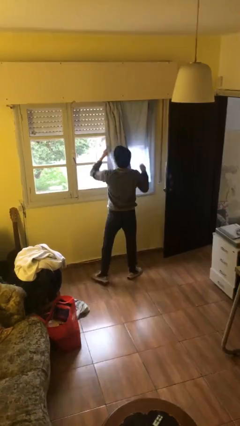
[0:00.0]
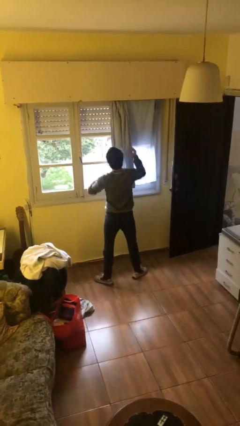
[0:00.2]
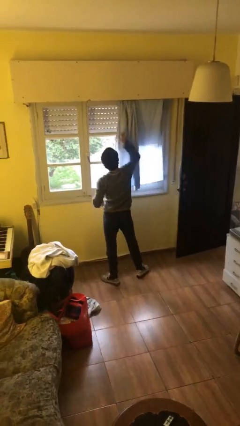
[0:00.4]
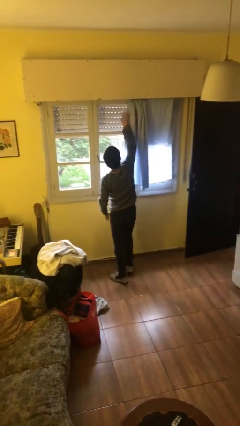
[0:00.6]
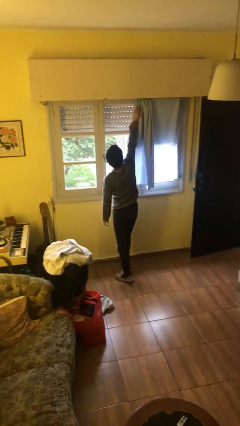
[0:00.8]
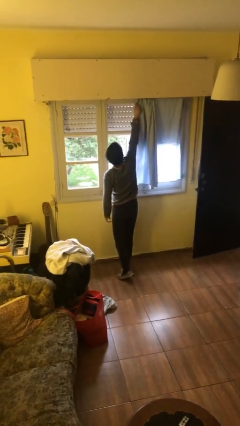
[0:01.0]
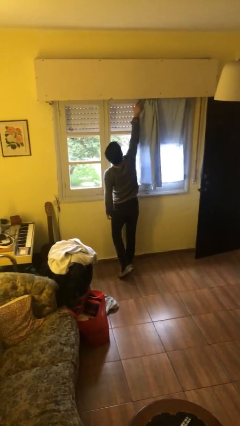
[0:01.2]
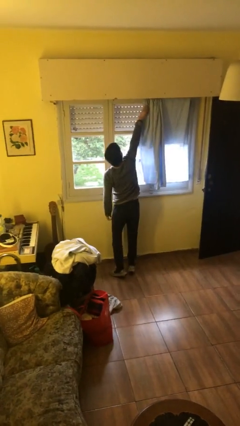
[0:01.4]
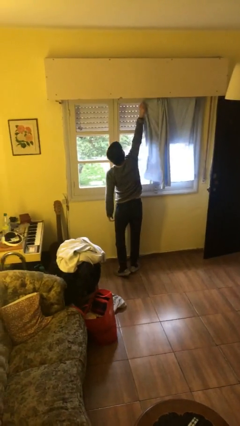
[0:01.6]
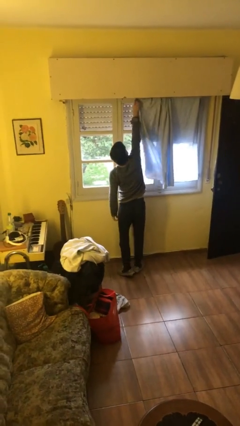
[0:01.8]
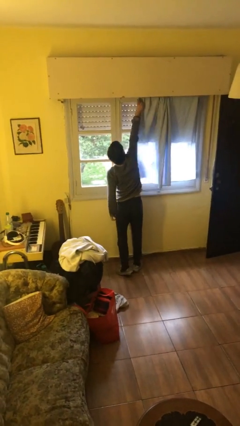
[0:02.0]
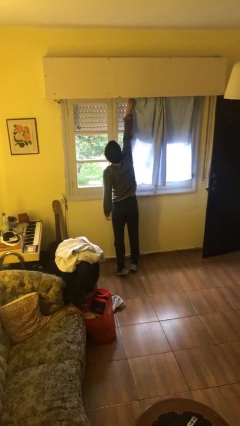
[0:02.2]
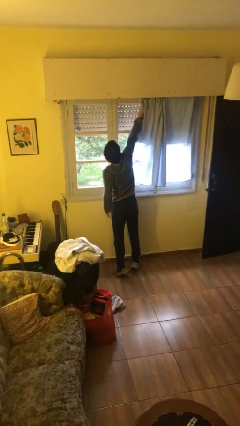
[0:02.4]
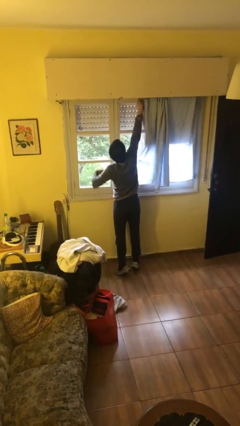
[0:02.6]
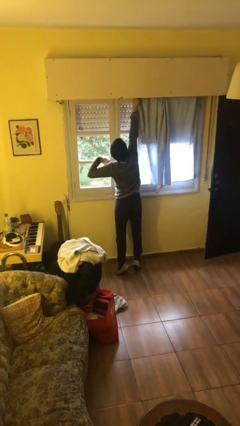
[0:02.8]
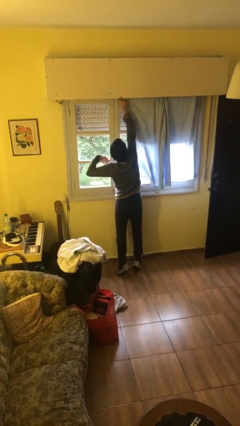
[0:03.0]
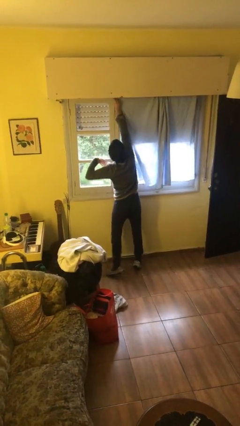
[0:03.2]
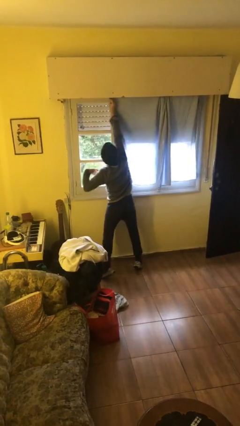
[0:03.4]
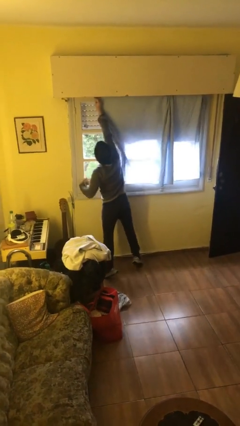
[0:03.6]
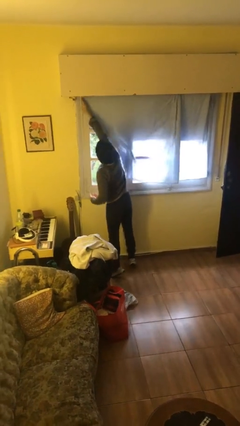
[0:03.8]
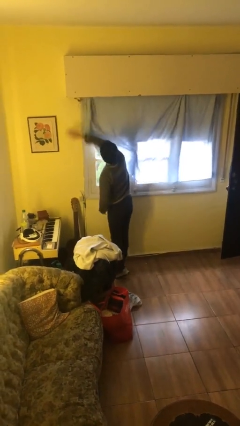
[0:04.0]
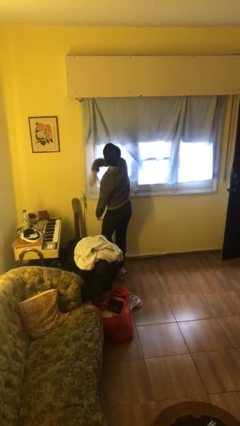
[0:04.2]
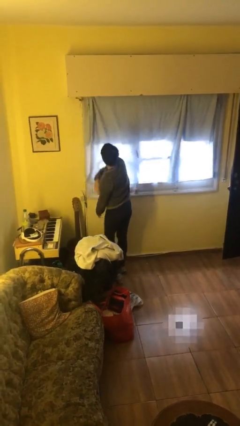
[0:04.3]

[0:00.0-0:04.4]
person closes curtains

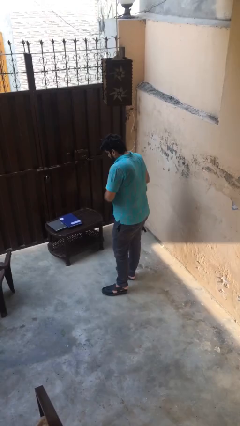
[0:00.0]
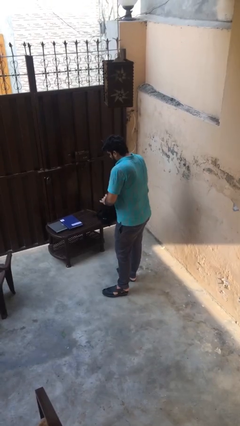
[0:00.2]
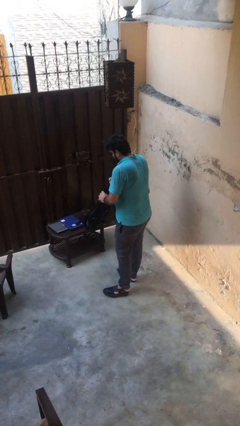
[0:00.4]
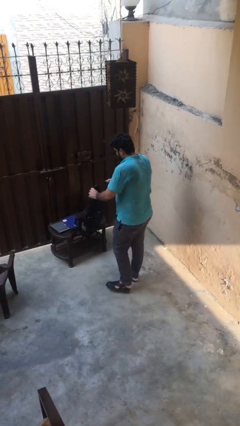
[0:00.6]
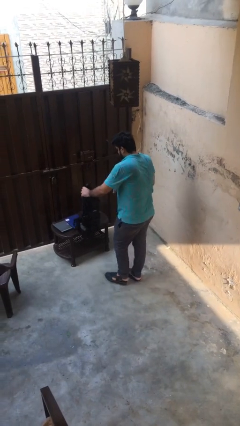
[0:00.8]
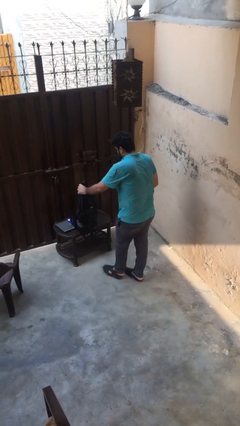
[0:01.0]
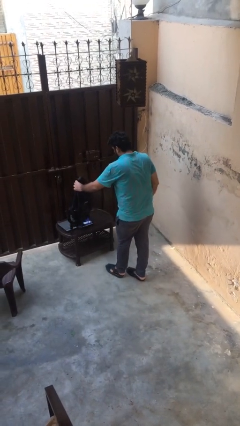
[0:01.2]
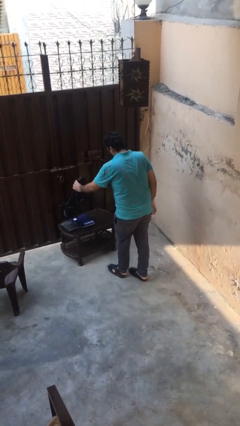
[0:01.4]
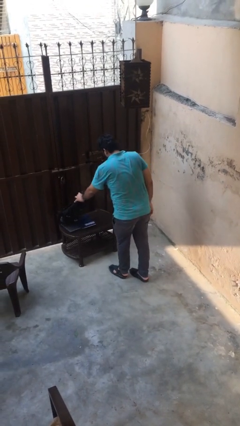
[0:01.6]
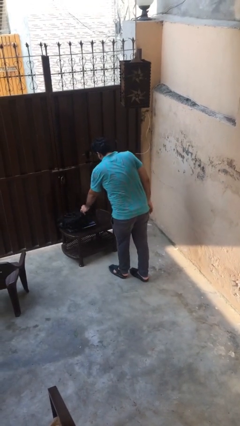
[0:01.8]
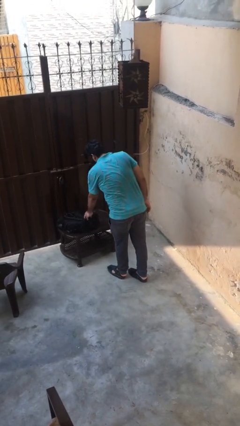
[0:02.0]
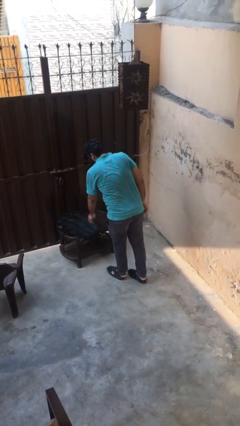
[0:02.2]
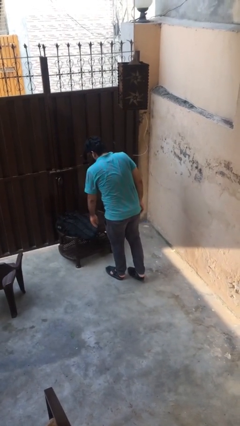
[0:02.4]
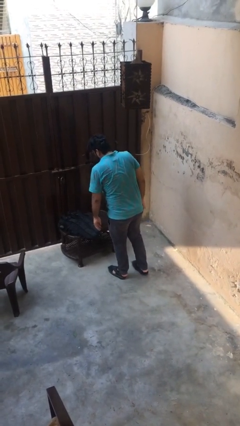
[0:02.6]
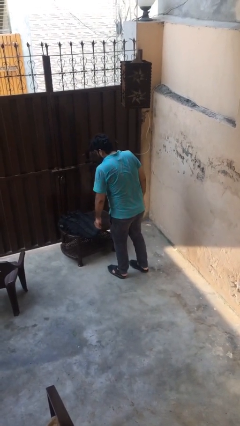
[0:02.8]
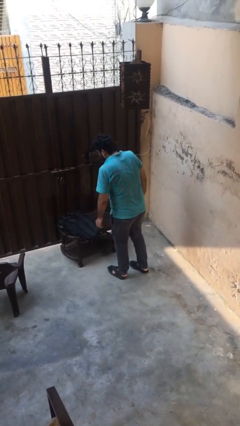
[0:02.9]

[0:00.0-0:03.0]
person puts down object on table

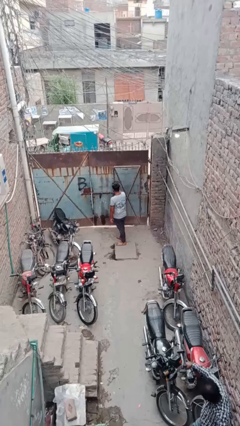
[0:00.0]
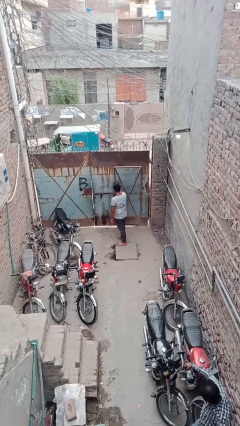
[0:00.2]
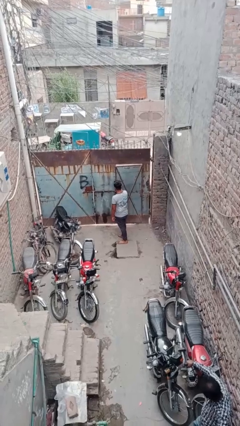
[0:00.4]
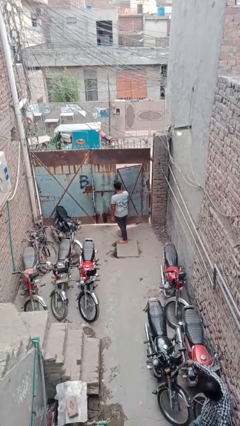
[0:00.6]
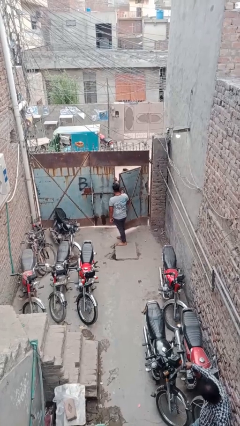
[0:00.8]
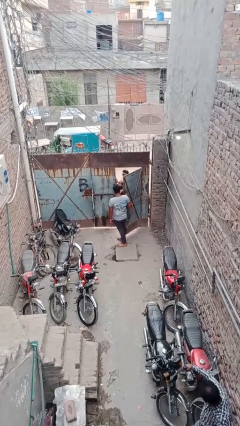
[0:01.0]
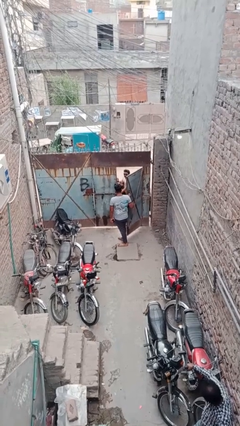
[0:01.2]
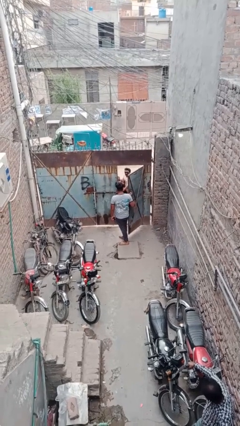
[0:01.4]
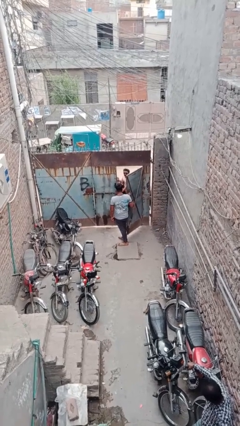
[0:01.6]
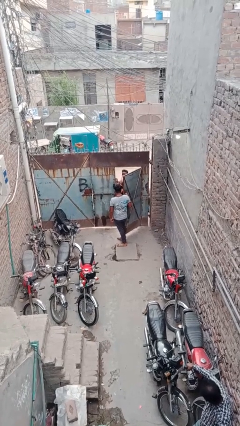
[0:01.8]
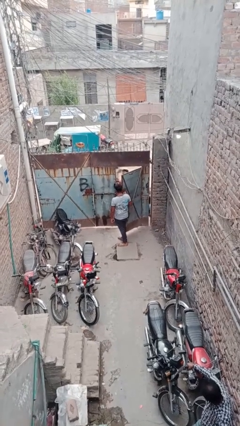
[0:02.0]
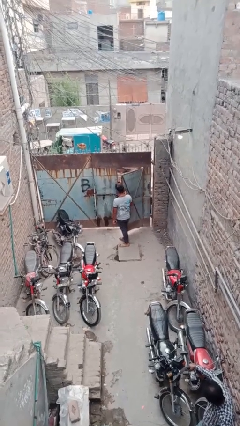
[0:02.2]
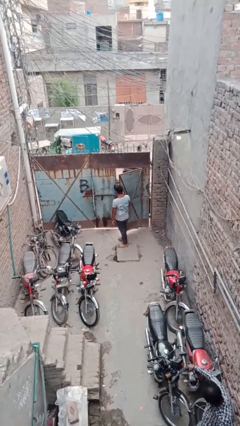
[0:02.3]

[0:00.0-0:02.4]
person opens facility door

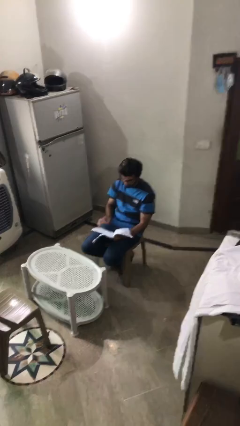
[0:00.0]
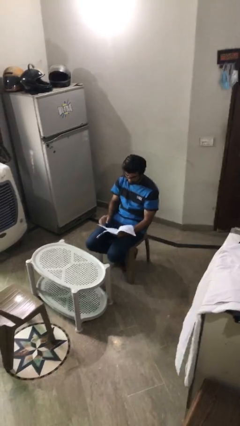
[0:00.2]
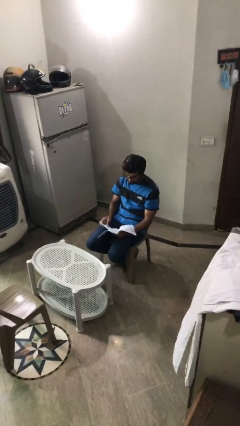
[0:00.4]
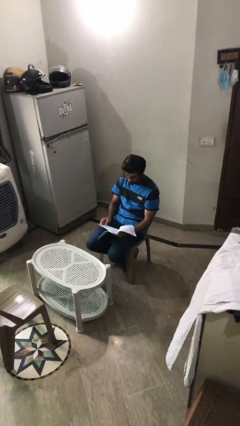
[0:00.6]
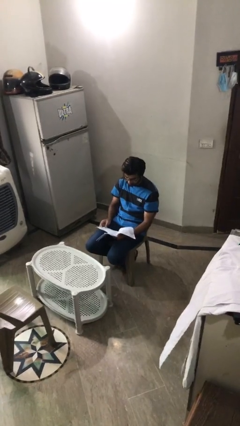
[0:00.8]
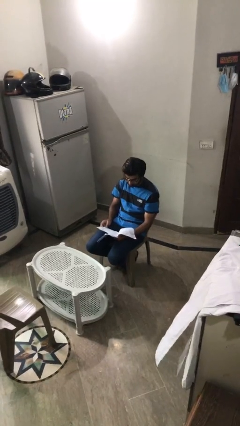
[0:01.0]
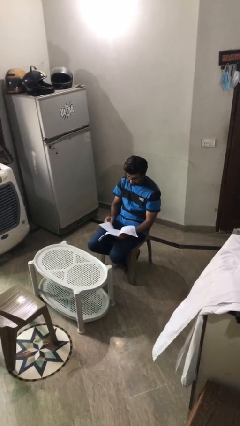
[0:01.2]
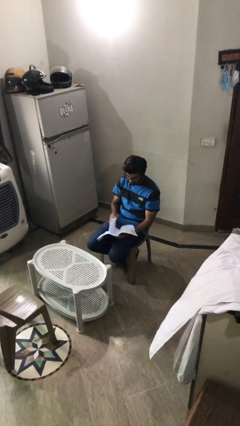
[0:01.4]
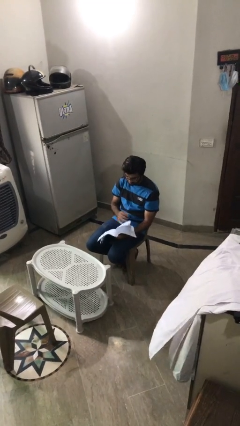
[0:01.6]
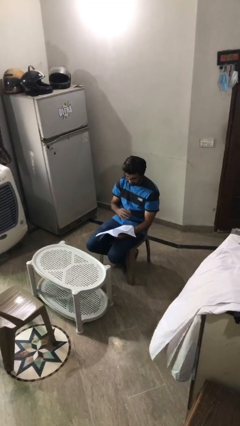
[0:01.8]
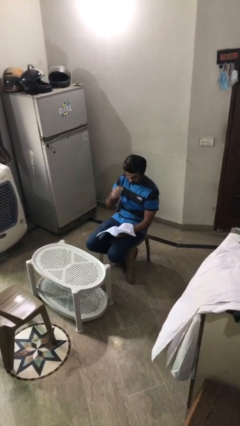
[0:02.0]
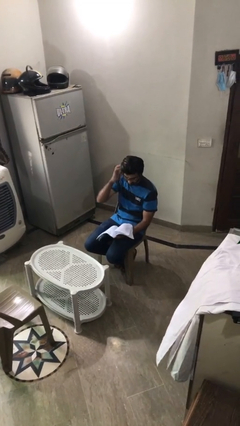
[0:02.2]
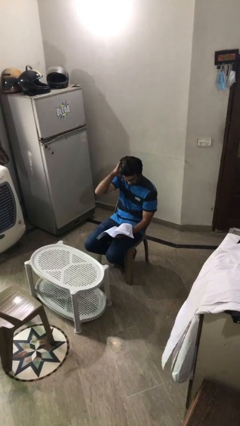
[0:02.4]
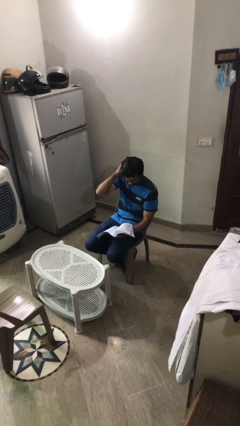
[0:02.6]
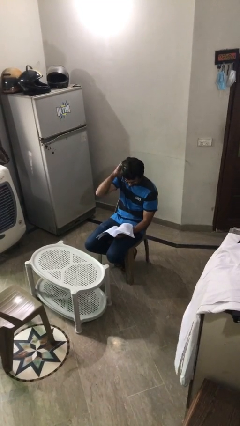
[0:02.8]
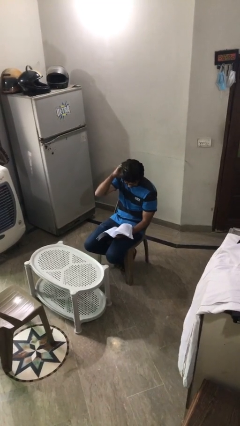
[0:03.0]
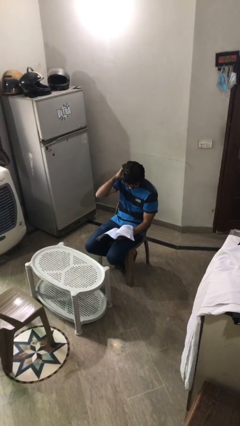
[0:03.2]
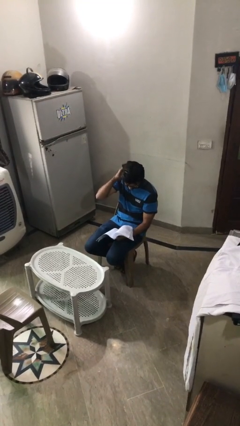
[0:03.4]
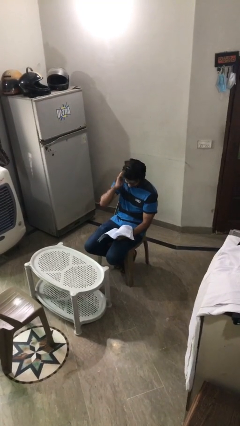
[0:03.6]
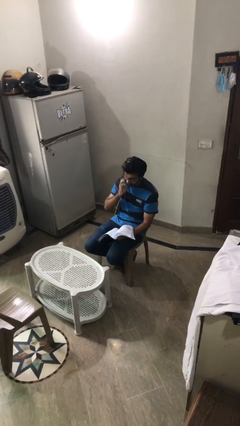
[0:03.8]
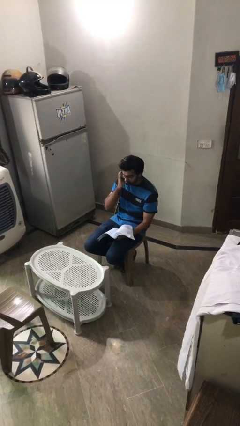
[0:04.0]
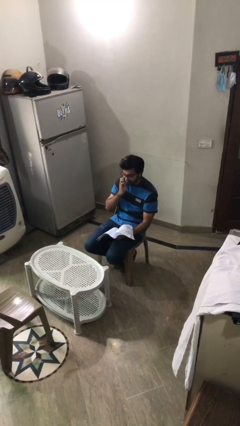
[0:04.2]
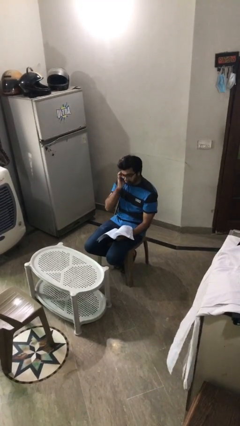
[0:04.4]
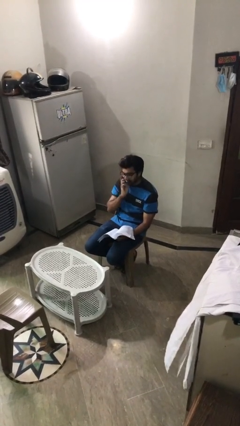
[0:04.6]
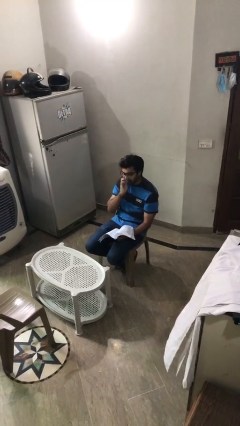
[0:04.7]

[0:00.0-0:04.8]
person reads document

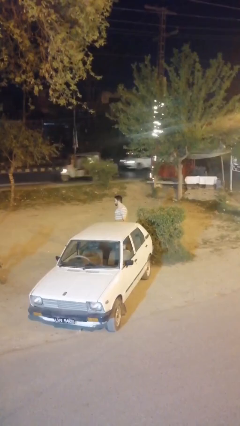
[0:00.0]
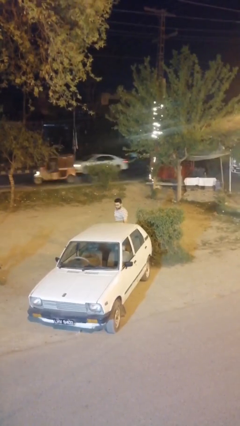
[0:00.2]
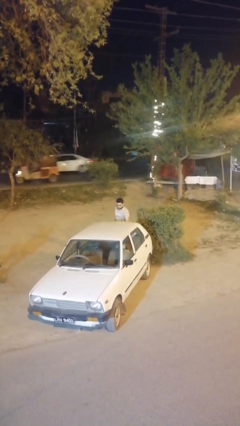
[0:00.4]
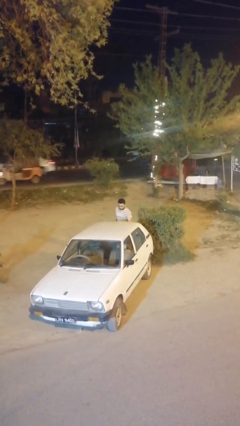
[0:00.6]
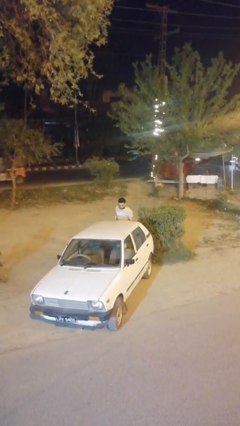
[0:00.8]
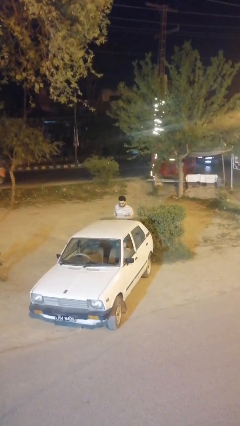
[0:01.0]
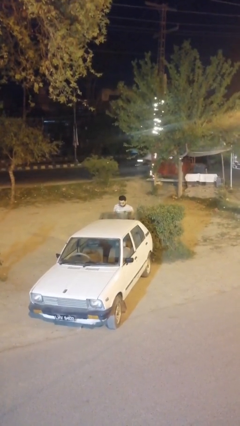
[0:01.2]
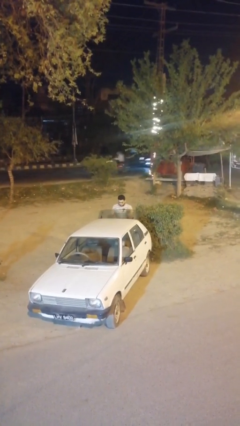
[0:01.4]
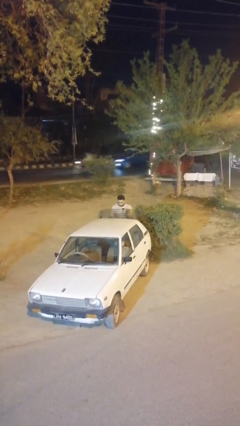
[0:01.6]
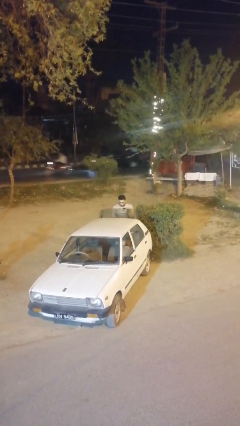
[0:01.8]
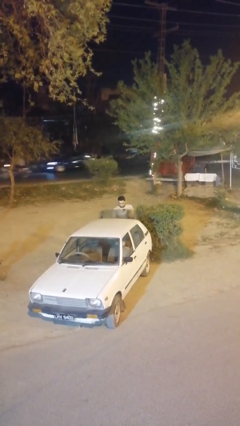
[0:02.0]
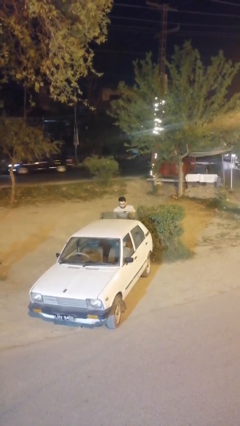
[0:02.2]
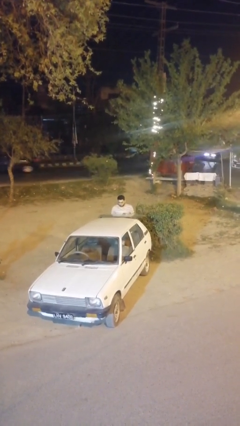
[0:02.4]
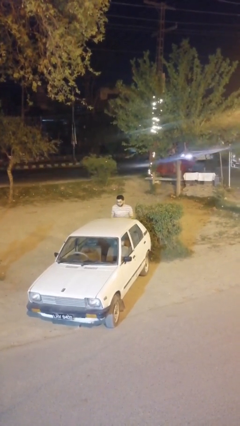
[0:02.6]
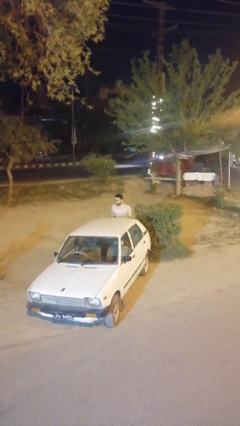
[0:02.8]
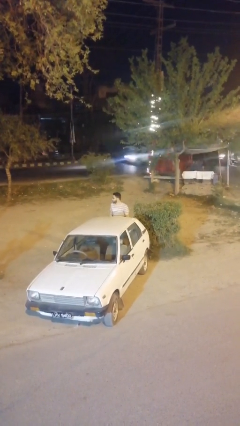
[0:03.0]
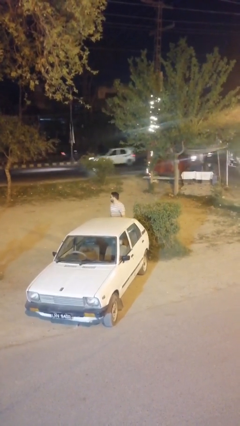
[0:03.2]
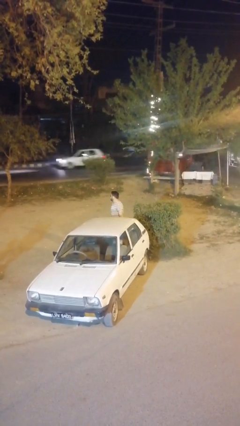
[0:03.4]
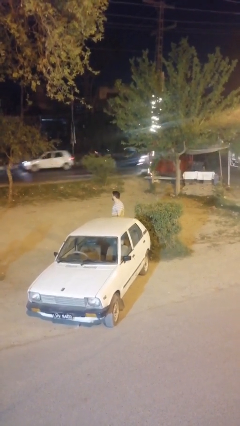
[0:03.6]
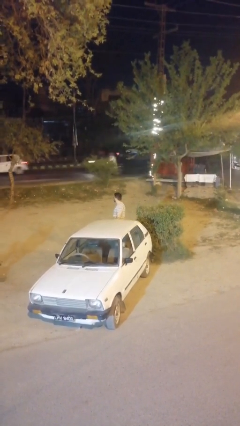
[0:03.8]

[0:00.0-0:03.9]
person loads car
